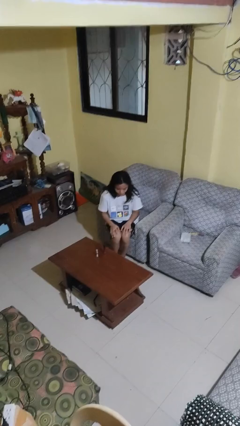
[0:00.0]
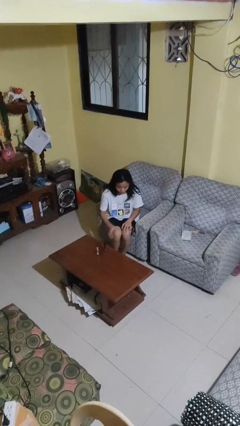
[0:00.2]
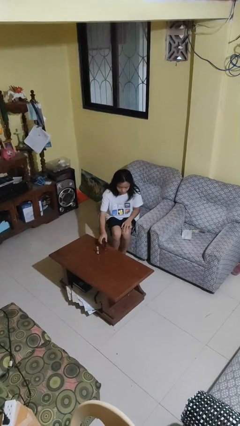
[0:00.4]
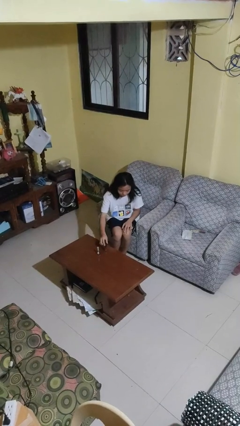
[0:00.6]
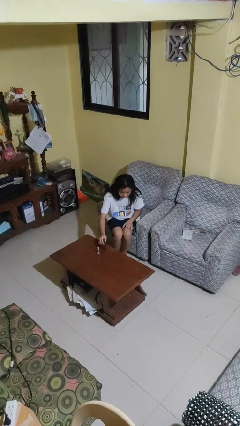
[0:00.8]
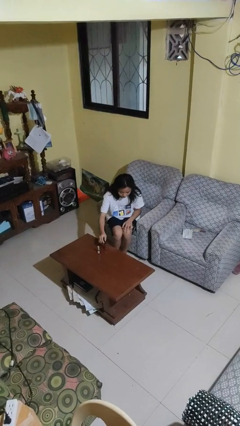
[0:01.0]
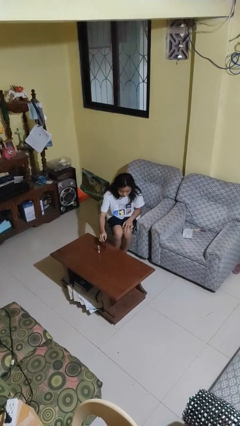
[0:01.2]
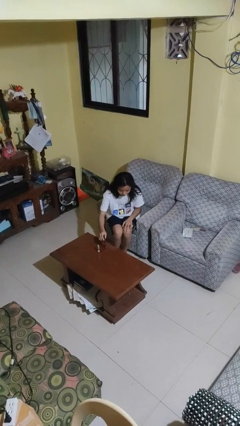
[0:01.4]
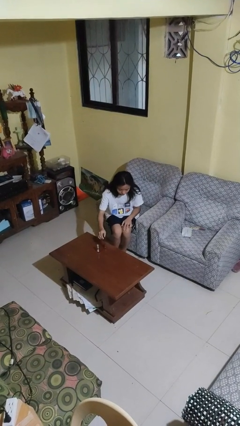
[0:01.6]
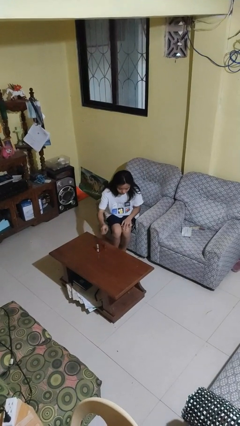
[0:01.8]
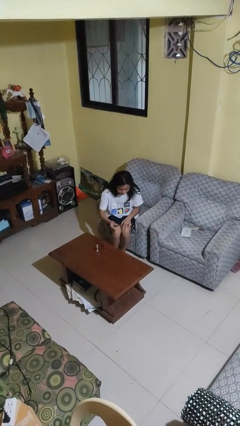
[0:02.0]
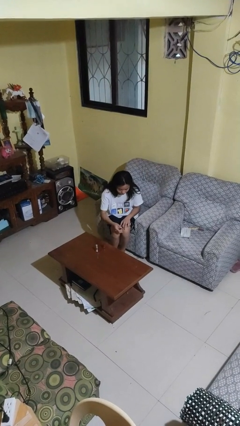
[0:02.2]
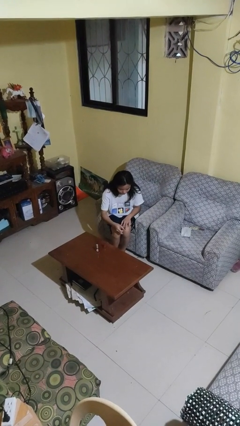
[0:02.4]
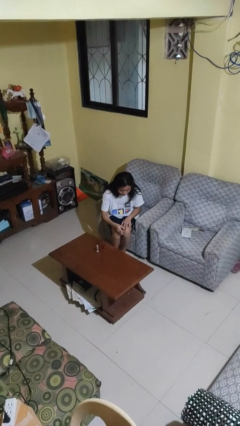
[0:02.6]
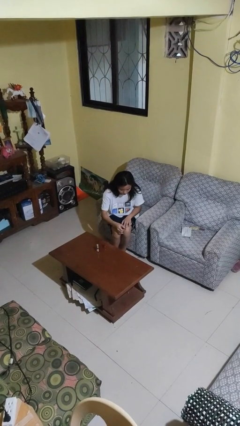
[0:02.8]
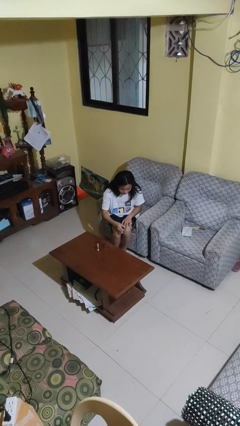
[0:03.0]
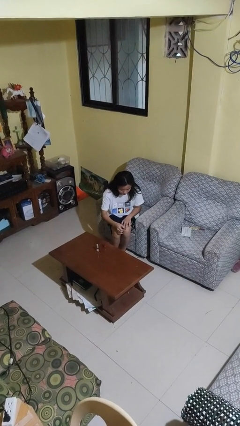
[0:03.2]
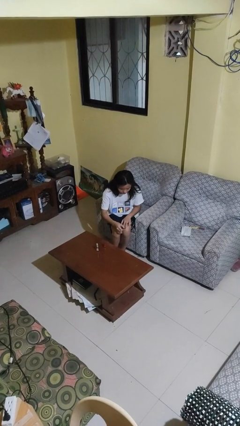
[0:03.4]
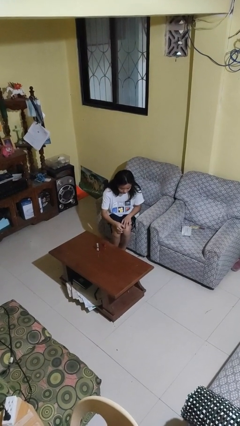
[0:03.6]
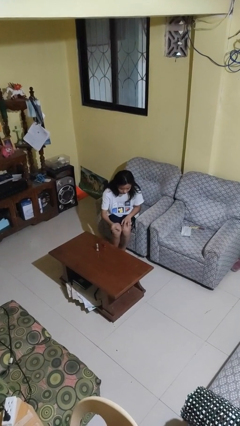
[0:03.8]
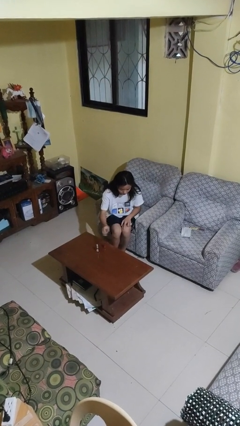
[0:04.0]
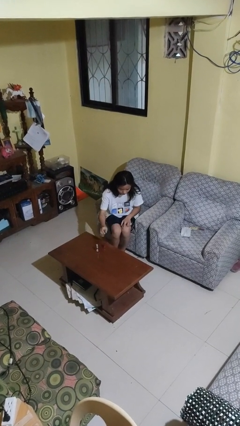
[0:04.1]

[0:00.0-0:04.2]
person paints fingernails

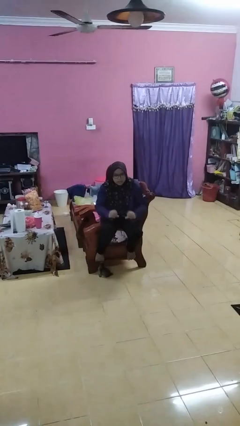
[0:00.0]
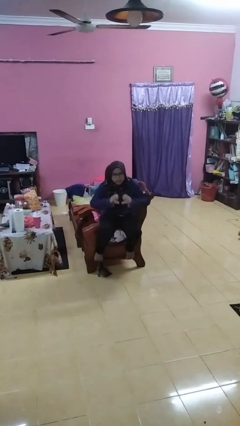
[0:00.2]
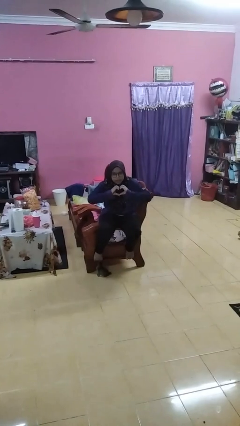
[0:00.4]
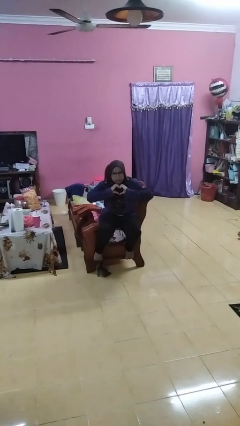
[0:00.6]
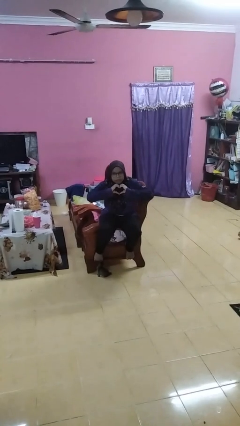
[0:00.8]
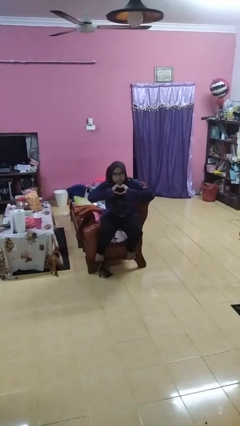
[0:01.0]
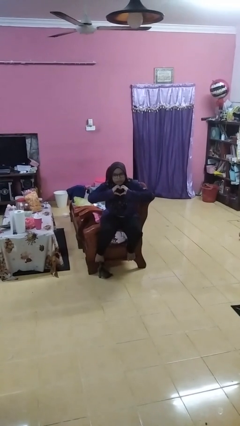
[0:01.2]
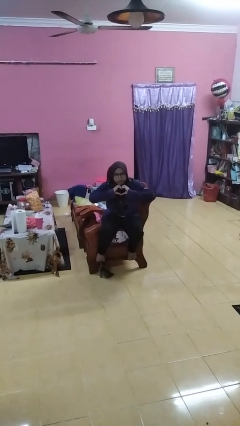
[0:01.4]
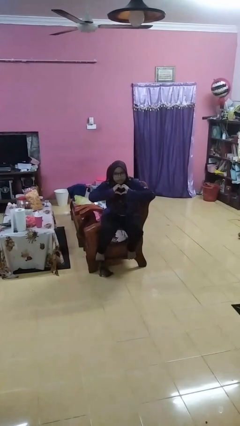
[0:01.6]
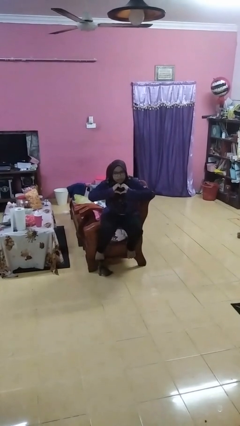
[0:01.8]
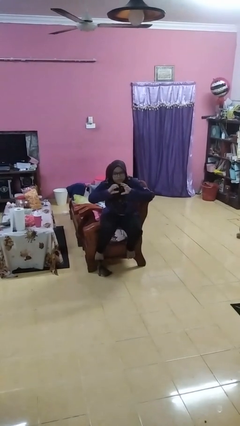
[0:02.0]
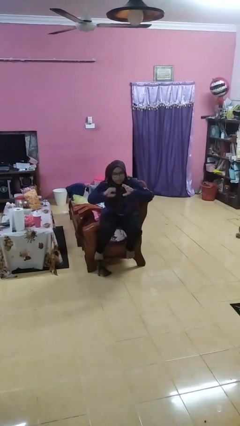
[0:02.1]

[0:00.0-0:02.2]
person gestures heart

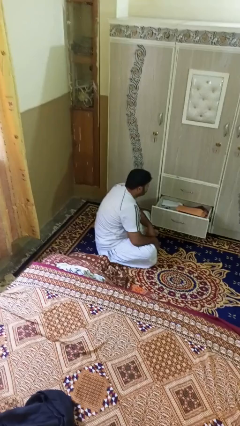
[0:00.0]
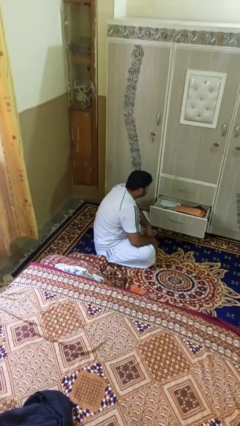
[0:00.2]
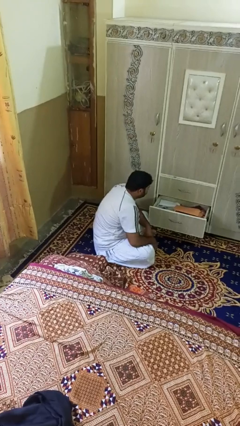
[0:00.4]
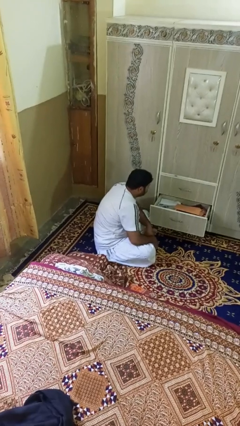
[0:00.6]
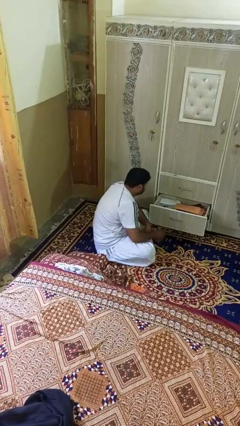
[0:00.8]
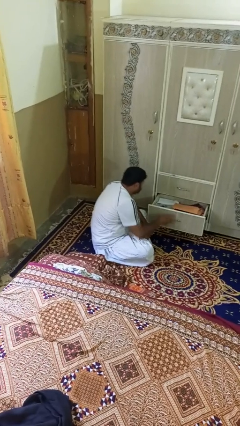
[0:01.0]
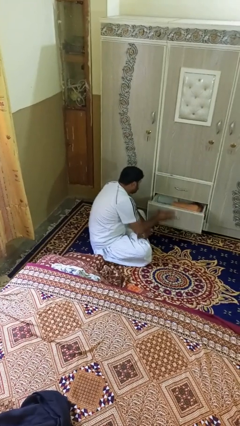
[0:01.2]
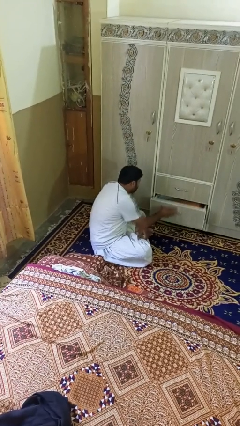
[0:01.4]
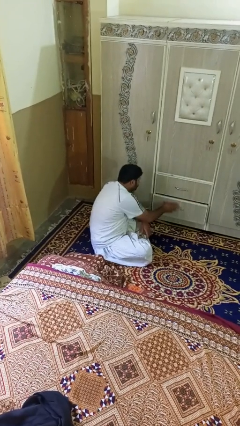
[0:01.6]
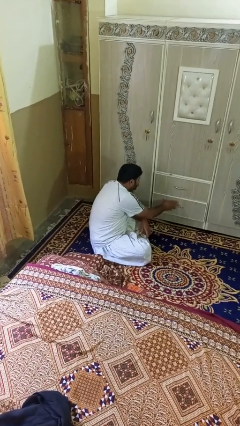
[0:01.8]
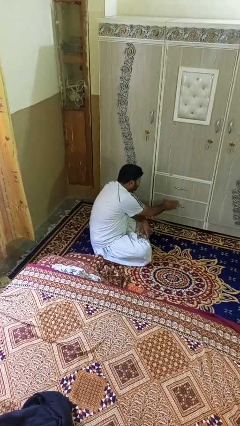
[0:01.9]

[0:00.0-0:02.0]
person closes dresser drawer

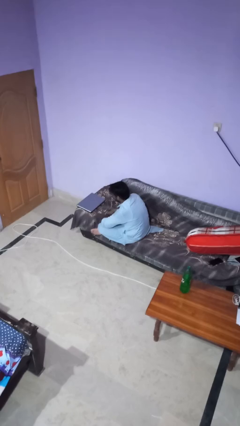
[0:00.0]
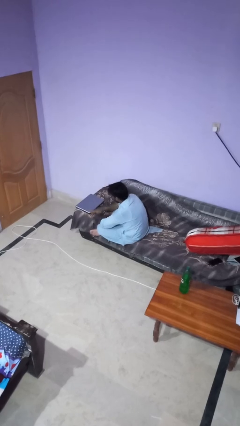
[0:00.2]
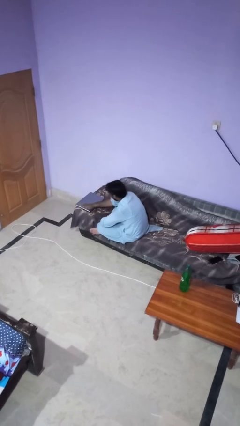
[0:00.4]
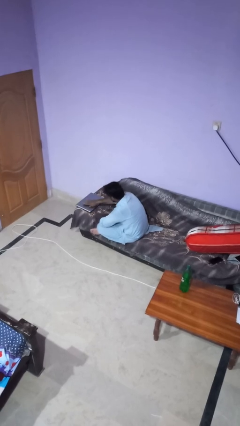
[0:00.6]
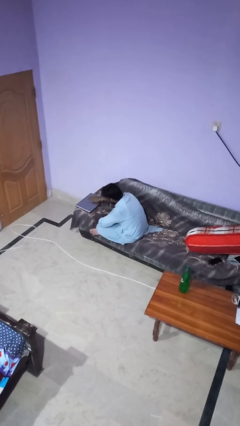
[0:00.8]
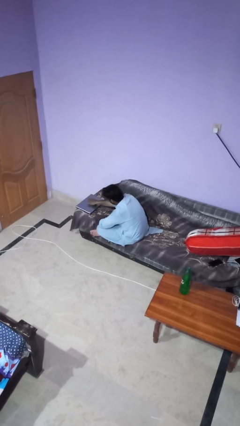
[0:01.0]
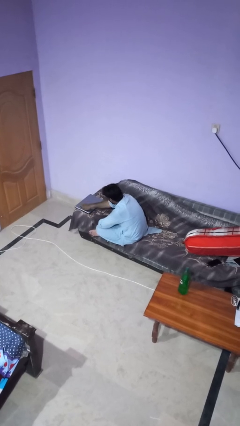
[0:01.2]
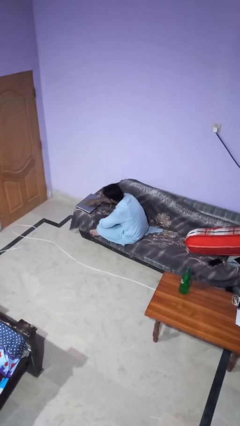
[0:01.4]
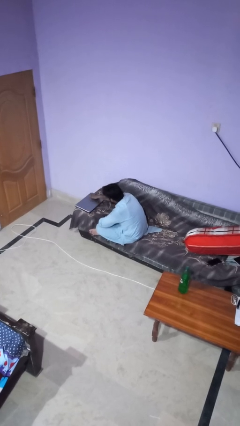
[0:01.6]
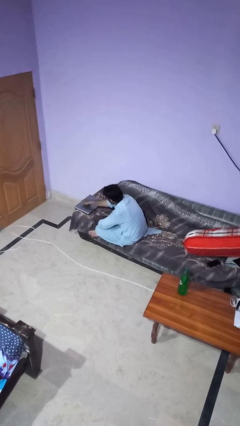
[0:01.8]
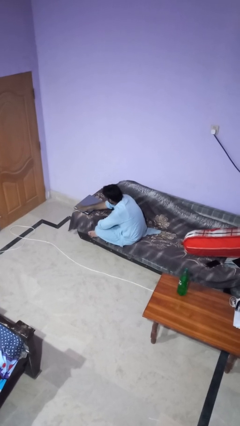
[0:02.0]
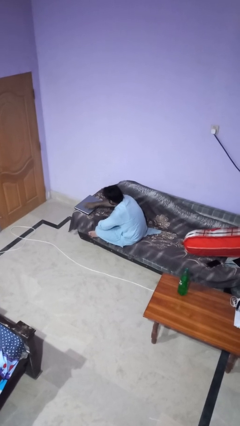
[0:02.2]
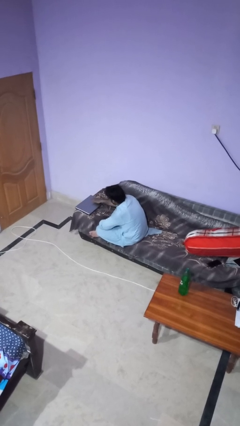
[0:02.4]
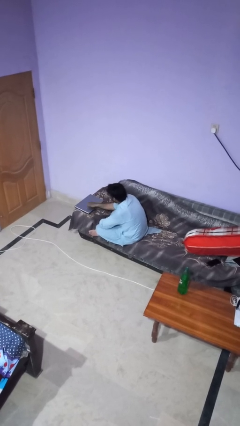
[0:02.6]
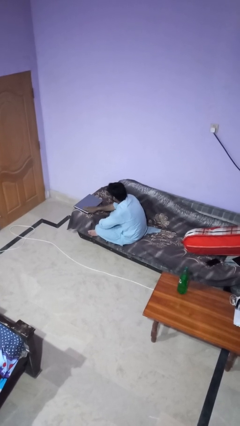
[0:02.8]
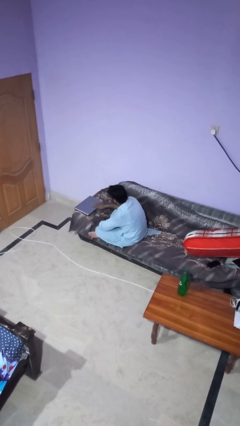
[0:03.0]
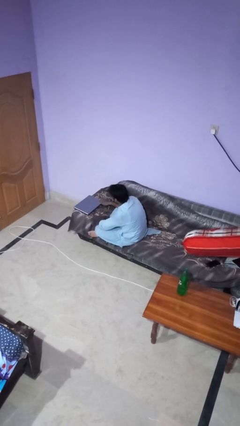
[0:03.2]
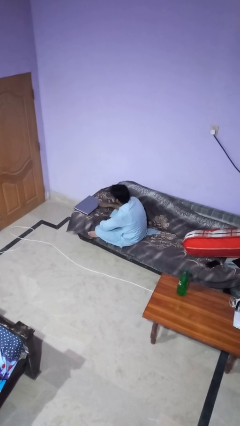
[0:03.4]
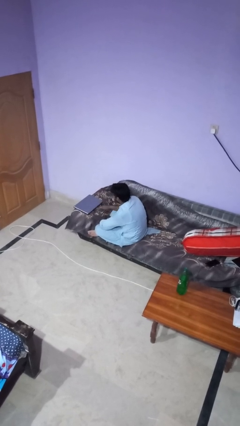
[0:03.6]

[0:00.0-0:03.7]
person waves hand over object

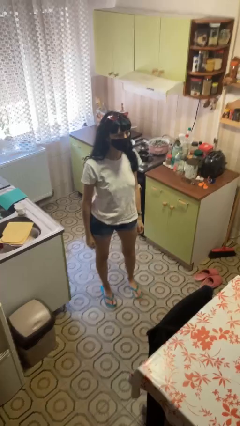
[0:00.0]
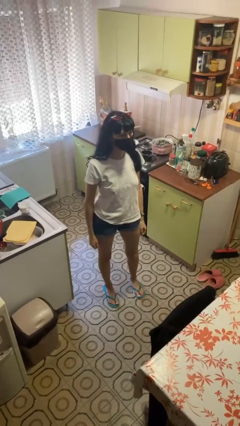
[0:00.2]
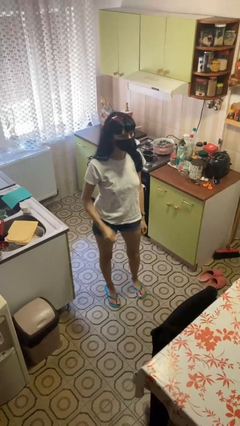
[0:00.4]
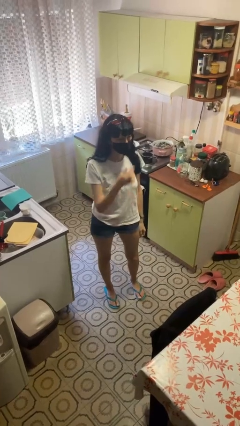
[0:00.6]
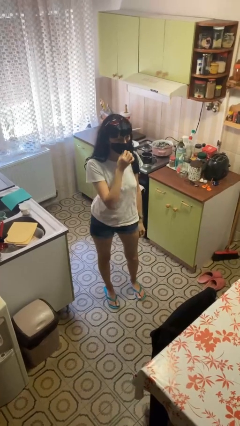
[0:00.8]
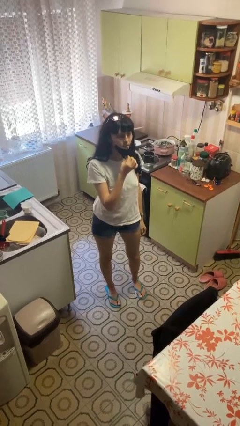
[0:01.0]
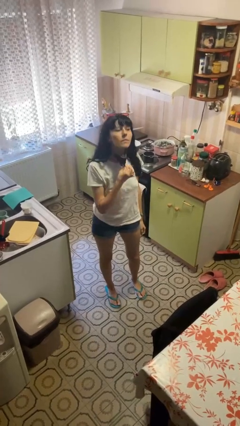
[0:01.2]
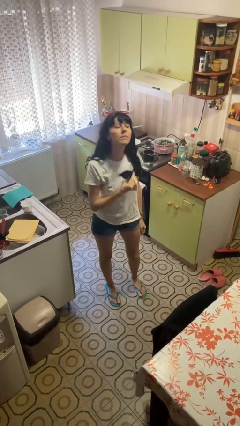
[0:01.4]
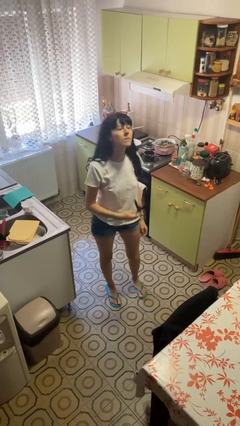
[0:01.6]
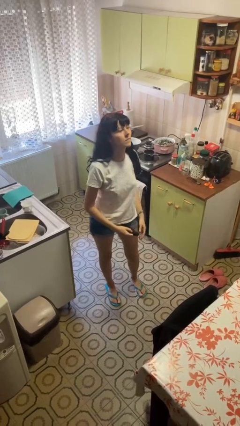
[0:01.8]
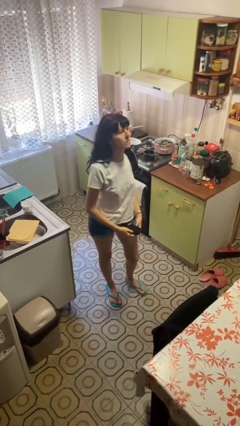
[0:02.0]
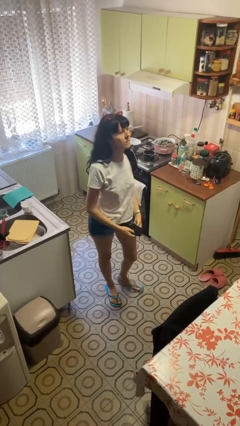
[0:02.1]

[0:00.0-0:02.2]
person takes off facemask

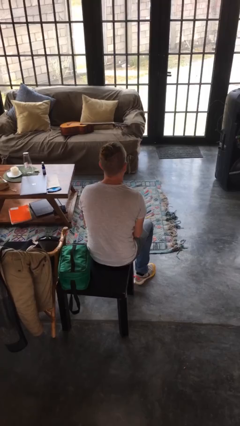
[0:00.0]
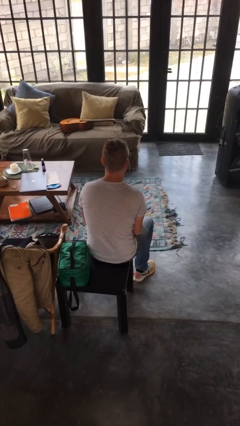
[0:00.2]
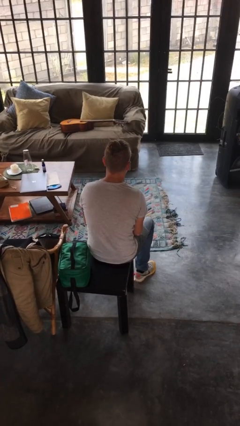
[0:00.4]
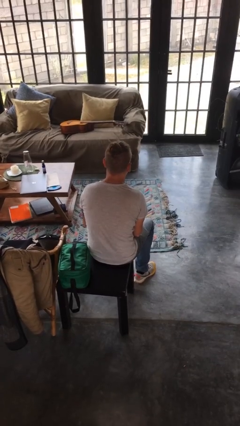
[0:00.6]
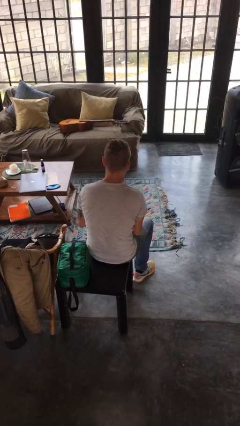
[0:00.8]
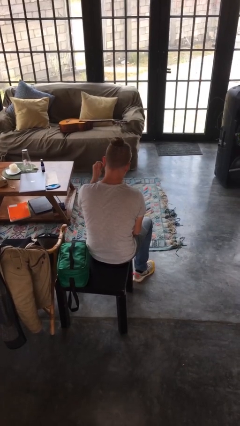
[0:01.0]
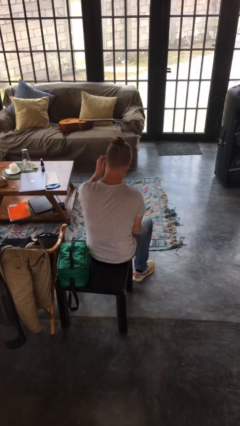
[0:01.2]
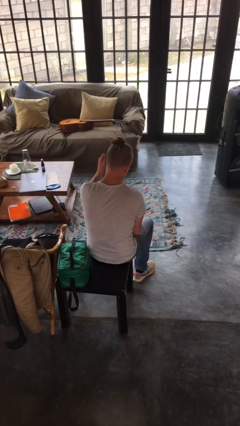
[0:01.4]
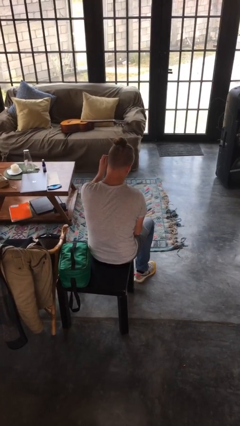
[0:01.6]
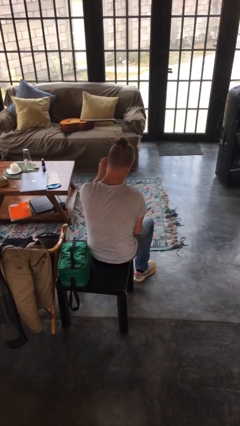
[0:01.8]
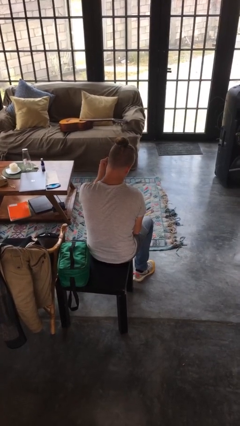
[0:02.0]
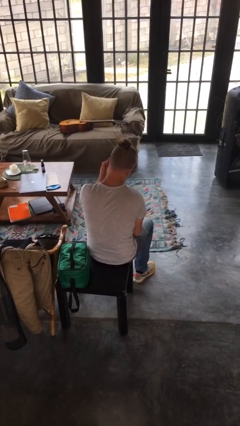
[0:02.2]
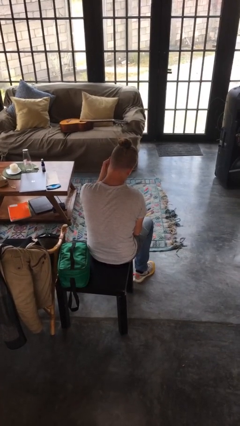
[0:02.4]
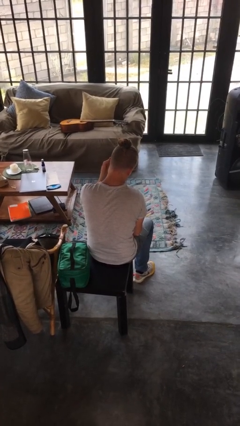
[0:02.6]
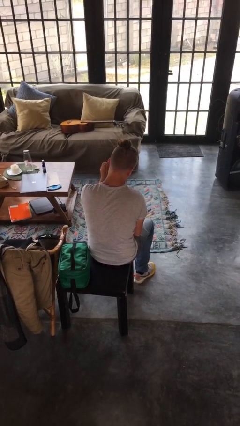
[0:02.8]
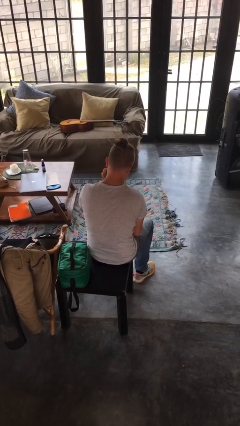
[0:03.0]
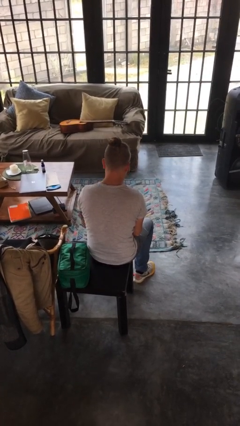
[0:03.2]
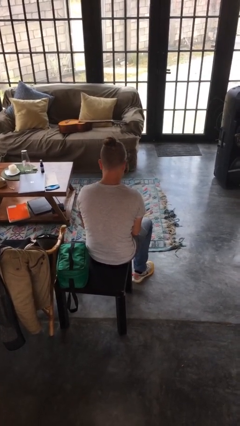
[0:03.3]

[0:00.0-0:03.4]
person touches earlobe
